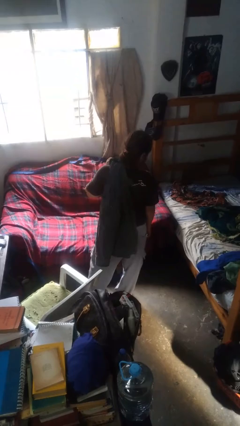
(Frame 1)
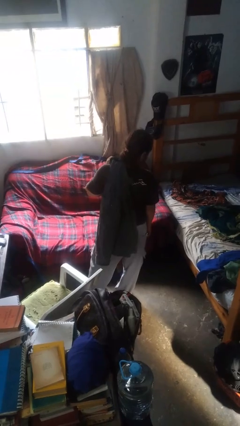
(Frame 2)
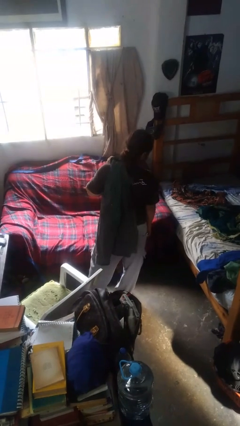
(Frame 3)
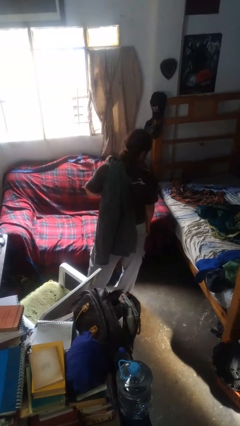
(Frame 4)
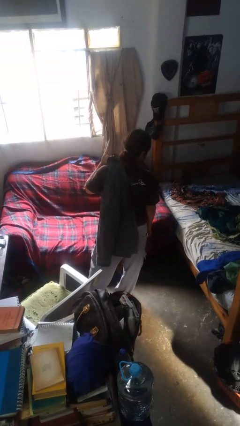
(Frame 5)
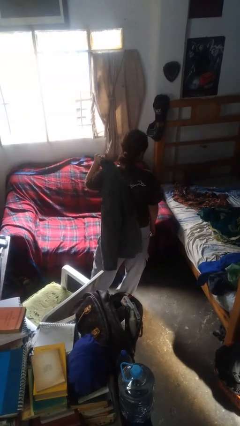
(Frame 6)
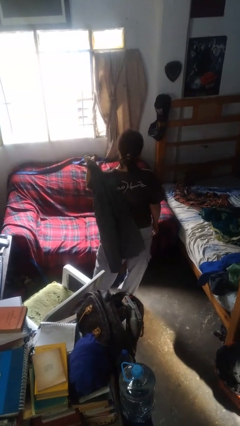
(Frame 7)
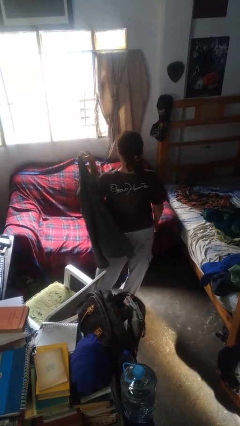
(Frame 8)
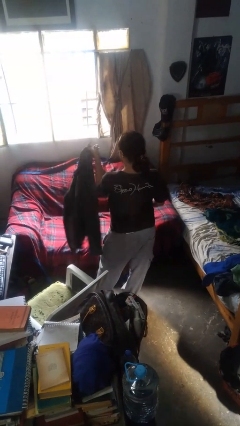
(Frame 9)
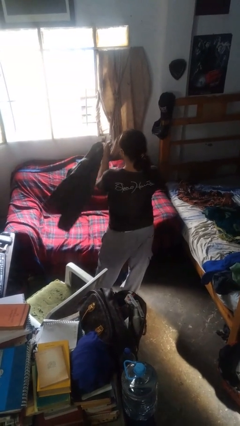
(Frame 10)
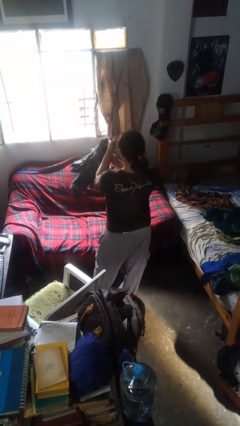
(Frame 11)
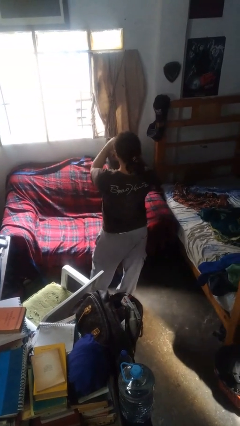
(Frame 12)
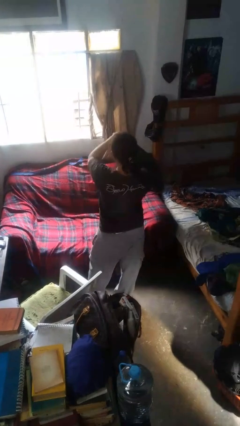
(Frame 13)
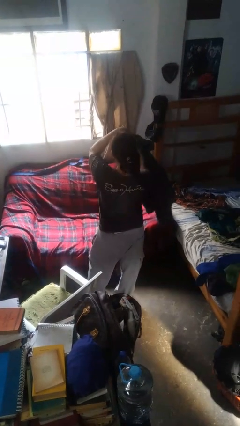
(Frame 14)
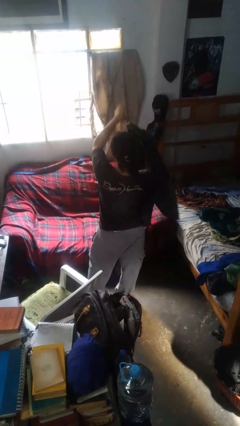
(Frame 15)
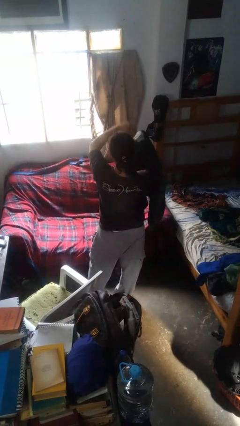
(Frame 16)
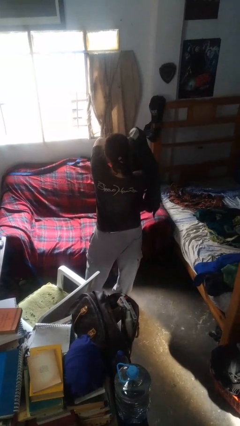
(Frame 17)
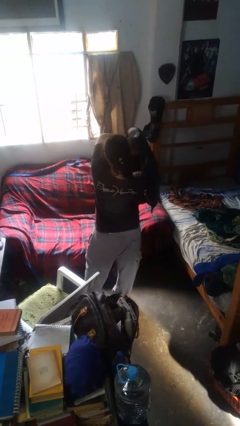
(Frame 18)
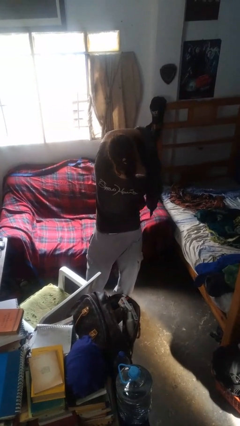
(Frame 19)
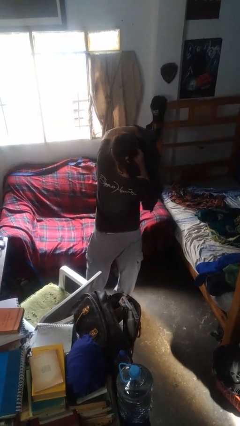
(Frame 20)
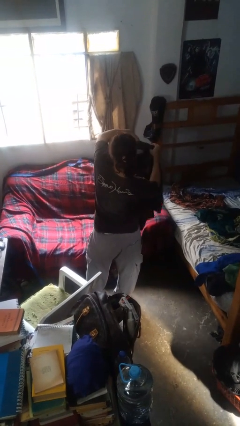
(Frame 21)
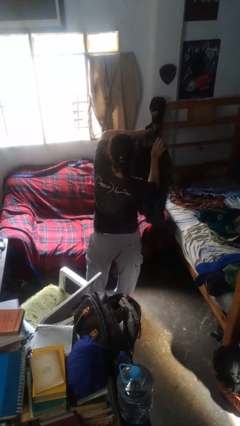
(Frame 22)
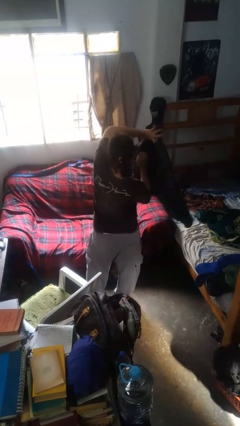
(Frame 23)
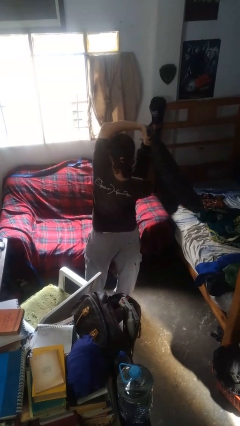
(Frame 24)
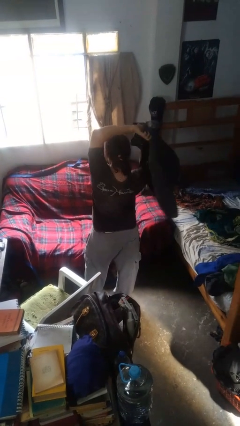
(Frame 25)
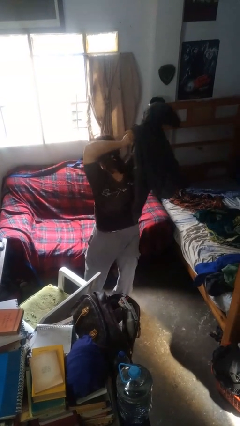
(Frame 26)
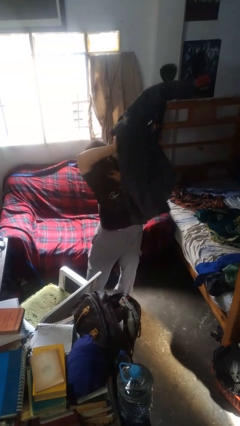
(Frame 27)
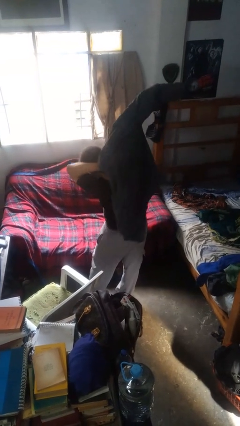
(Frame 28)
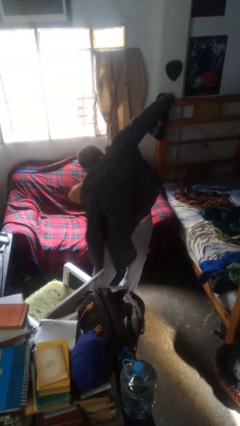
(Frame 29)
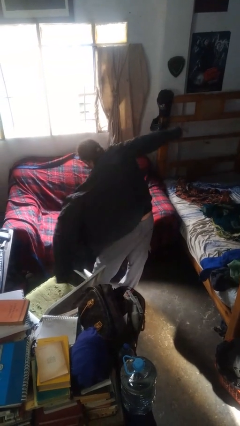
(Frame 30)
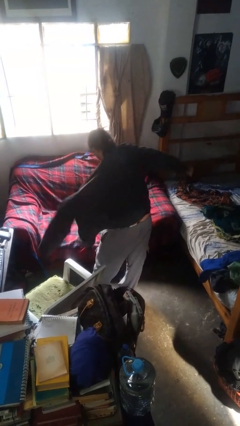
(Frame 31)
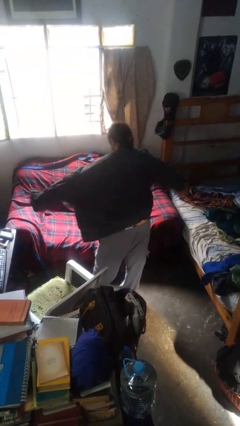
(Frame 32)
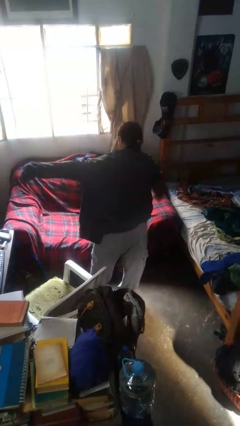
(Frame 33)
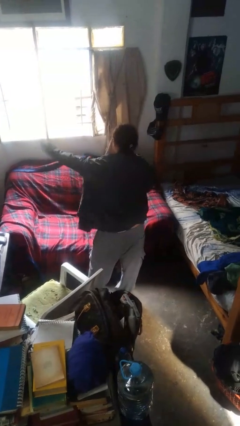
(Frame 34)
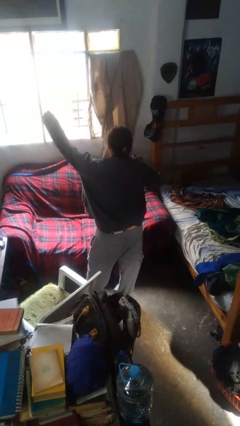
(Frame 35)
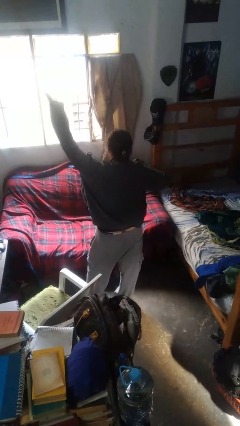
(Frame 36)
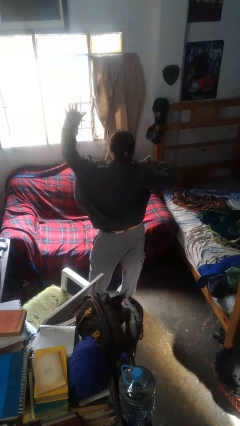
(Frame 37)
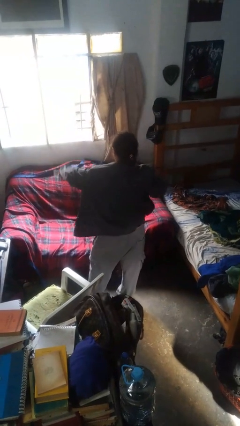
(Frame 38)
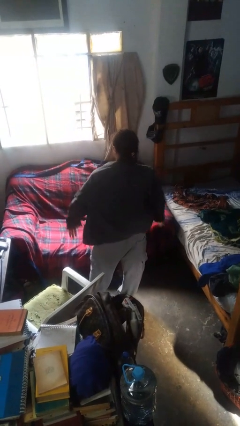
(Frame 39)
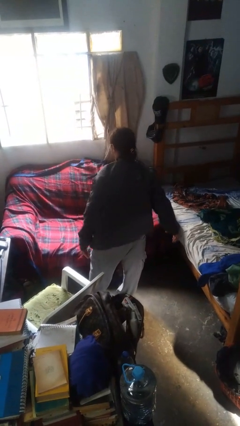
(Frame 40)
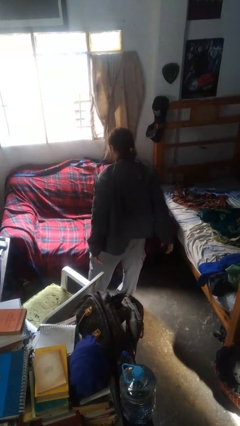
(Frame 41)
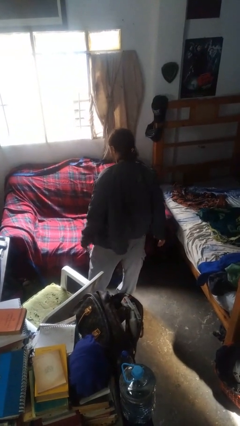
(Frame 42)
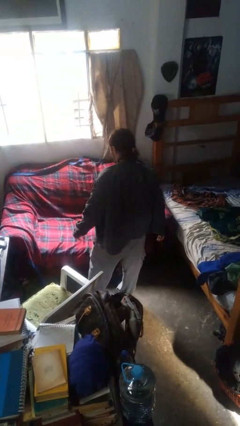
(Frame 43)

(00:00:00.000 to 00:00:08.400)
person puts on jacket

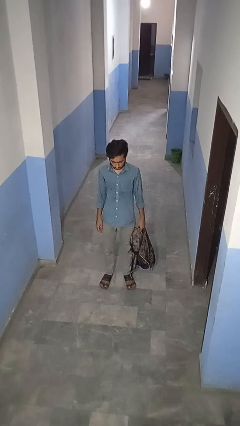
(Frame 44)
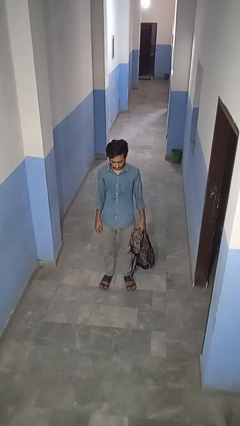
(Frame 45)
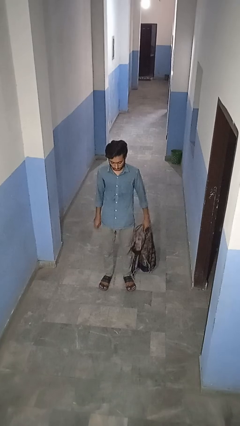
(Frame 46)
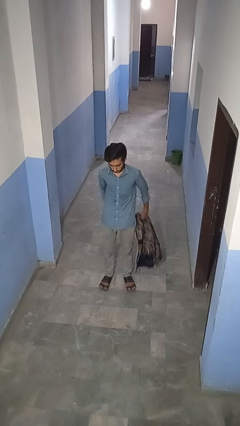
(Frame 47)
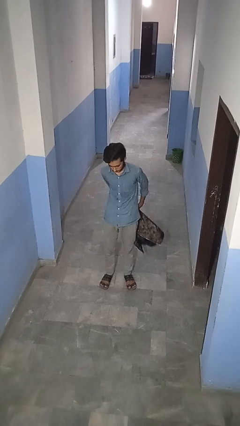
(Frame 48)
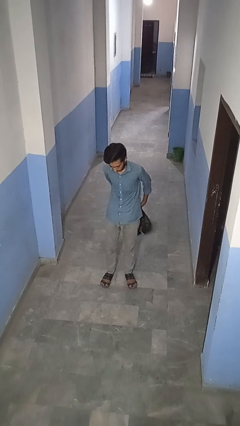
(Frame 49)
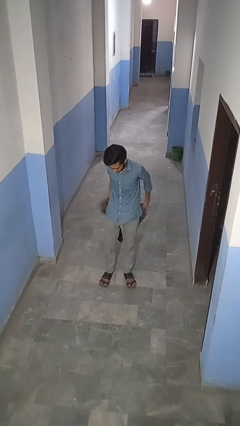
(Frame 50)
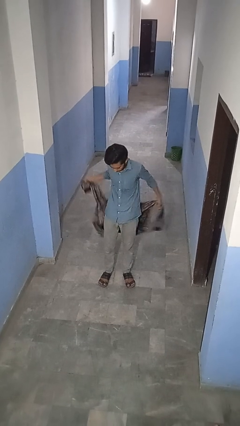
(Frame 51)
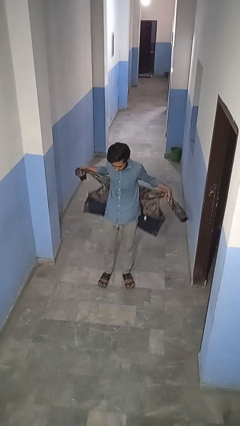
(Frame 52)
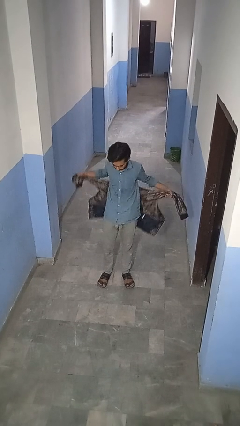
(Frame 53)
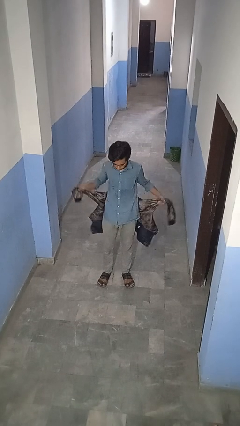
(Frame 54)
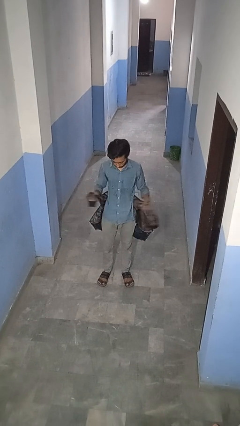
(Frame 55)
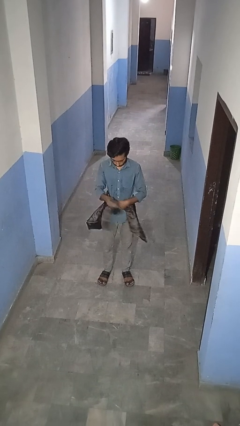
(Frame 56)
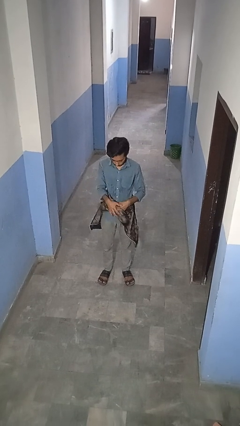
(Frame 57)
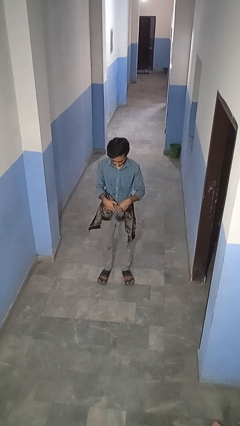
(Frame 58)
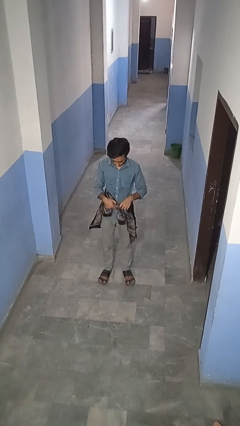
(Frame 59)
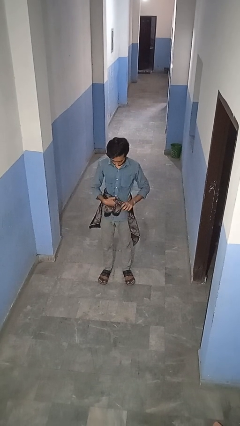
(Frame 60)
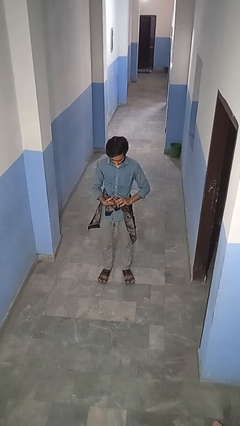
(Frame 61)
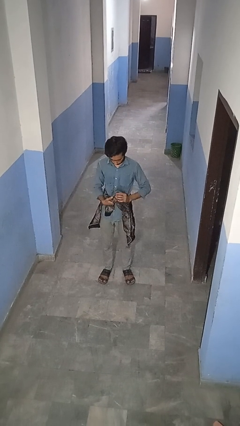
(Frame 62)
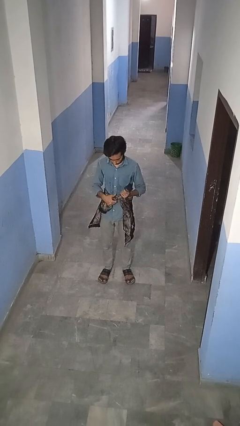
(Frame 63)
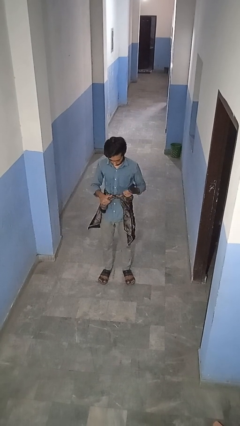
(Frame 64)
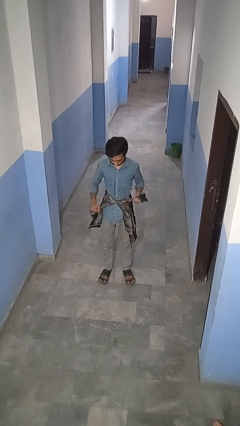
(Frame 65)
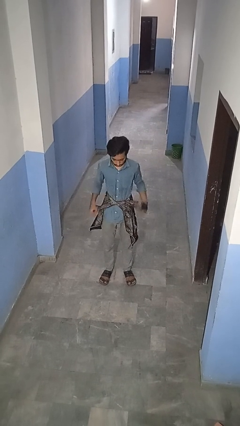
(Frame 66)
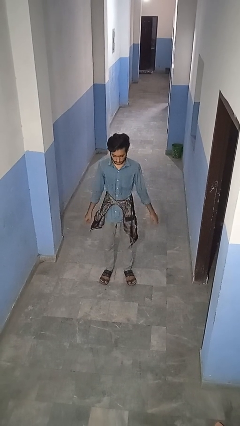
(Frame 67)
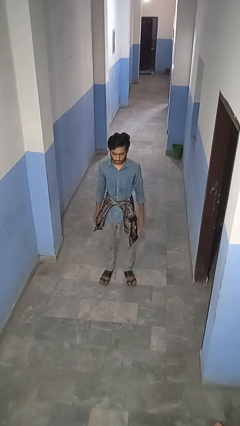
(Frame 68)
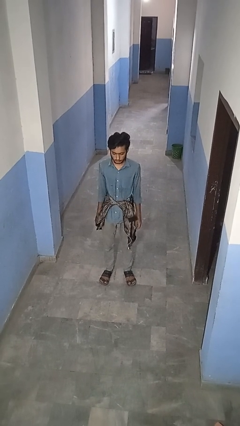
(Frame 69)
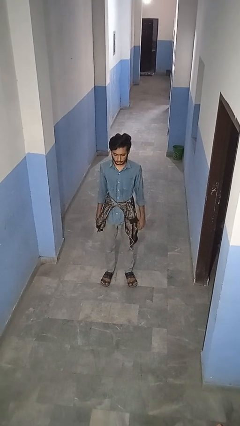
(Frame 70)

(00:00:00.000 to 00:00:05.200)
person ties jacket around waist

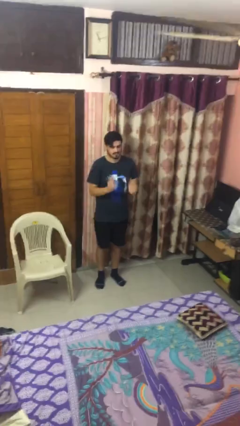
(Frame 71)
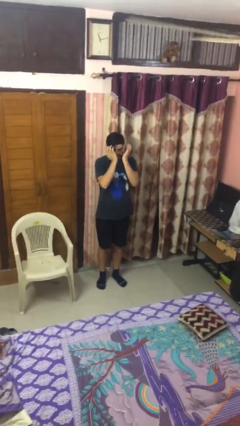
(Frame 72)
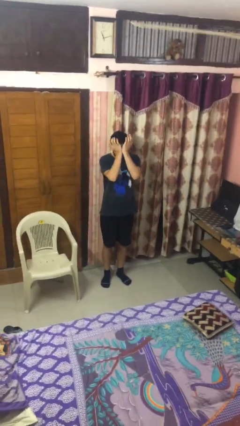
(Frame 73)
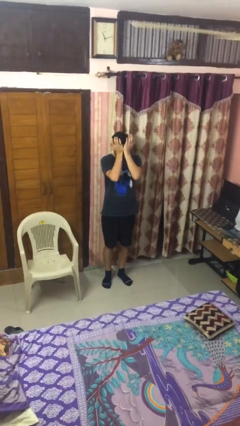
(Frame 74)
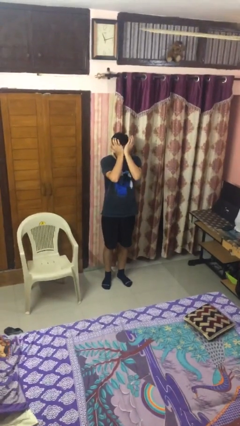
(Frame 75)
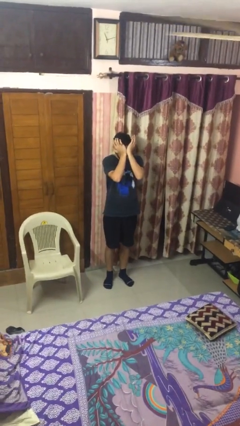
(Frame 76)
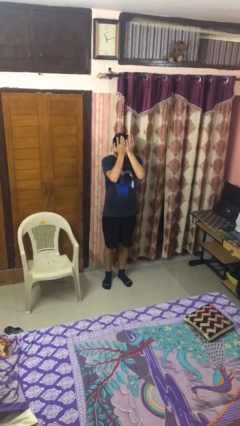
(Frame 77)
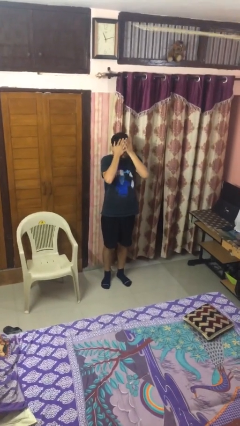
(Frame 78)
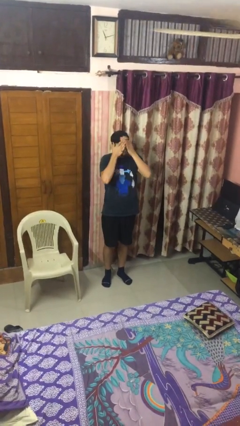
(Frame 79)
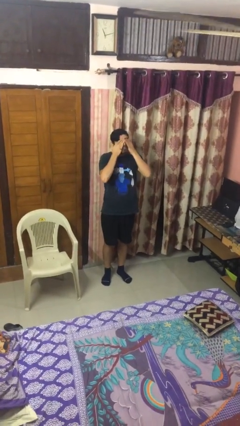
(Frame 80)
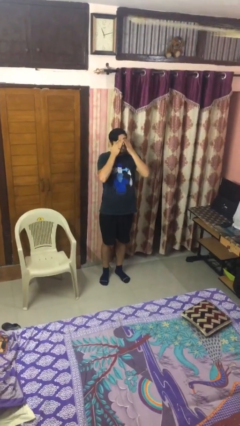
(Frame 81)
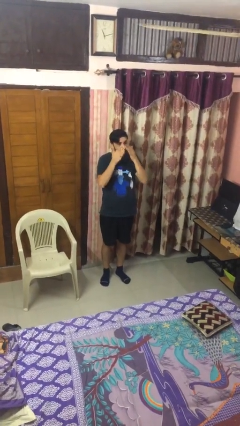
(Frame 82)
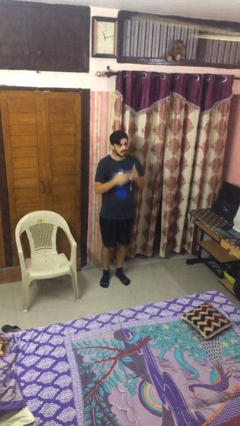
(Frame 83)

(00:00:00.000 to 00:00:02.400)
person rubs eyes

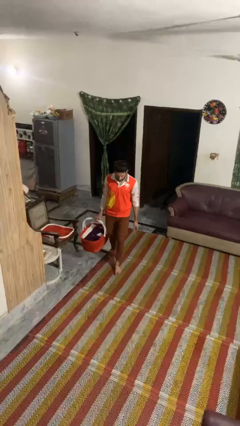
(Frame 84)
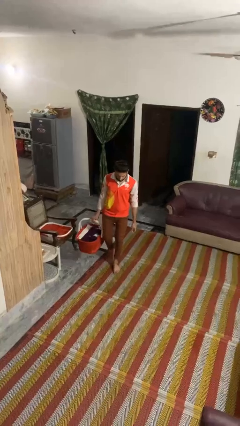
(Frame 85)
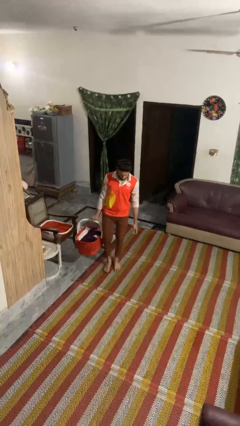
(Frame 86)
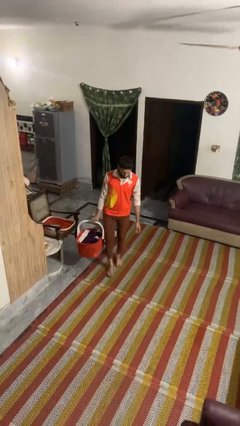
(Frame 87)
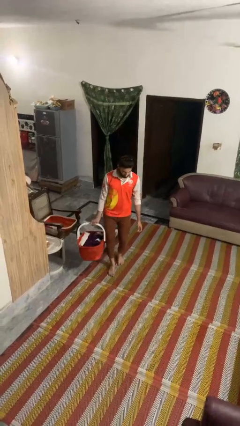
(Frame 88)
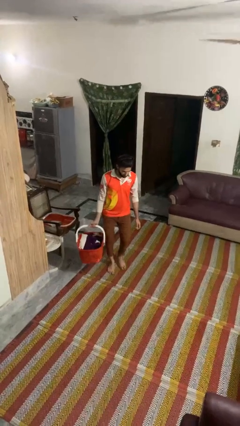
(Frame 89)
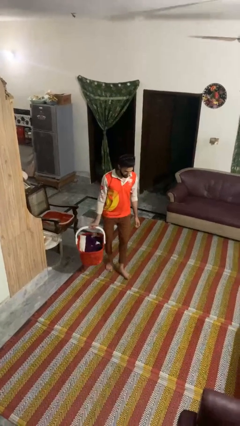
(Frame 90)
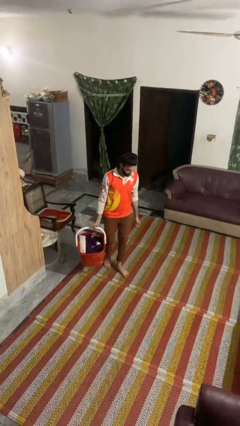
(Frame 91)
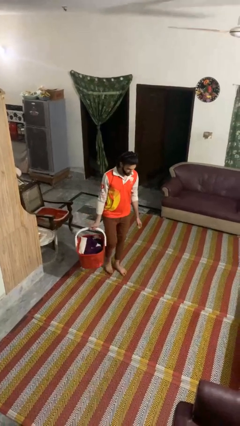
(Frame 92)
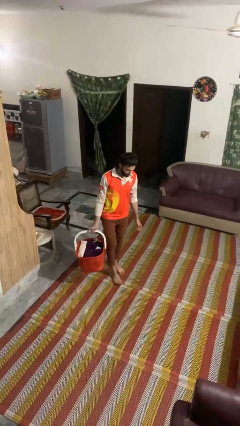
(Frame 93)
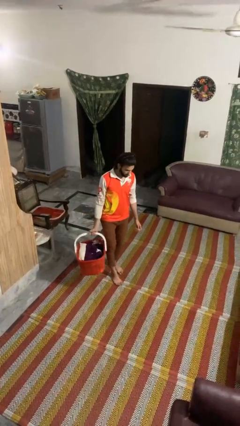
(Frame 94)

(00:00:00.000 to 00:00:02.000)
person carries laundry basket
